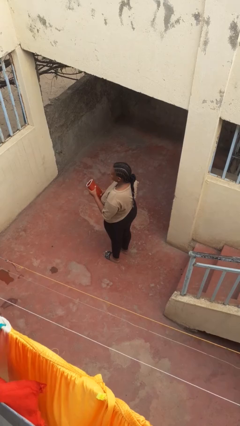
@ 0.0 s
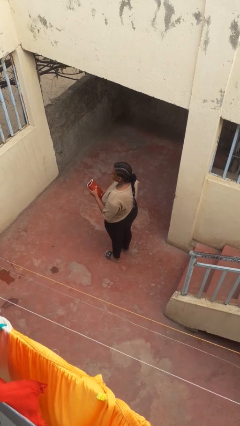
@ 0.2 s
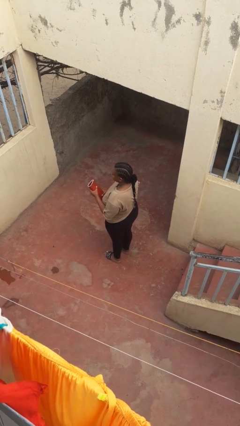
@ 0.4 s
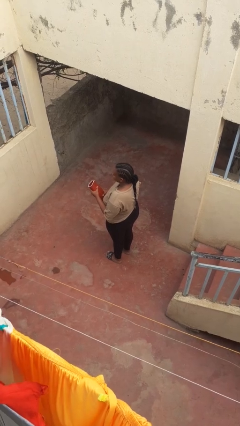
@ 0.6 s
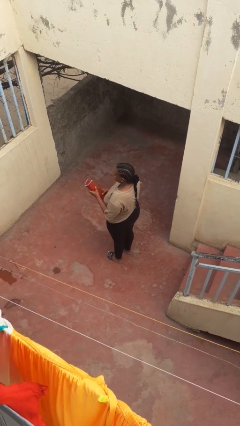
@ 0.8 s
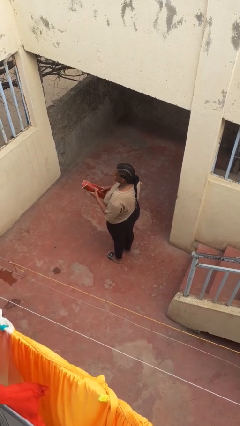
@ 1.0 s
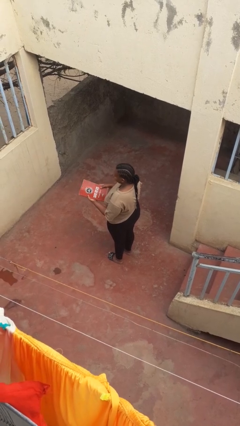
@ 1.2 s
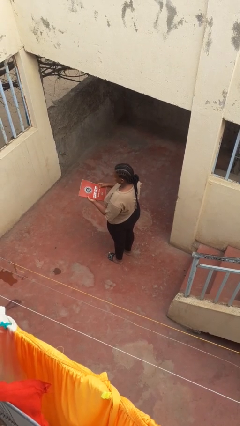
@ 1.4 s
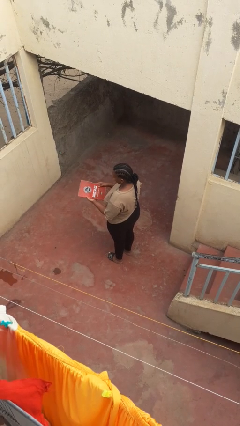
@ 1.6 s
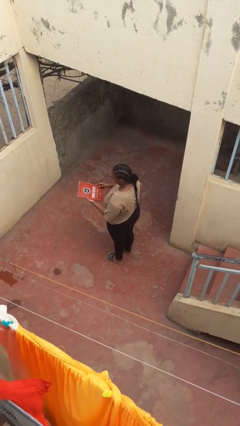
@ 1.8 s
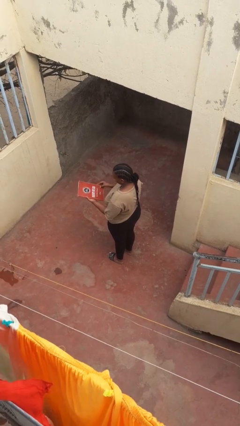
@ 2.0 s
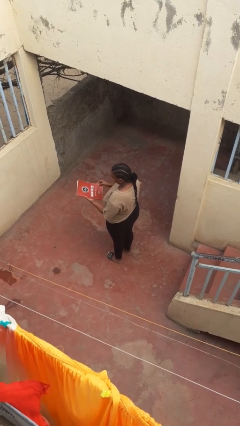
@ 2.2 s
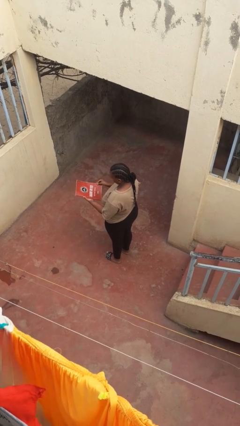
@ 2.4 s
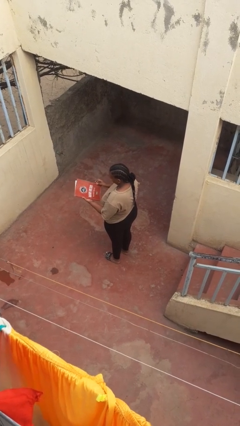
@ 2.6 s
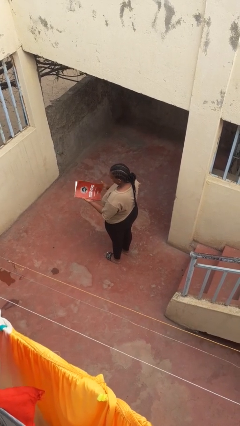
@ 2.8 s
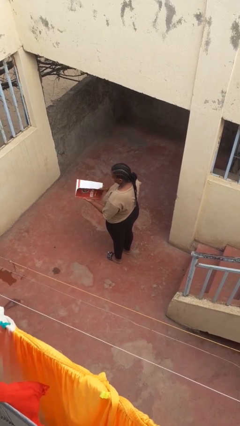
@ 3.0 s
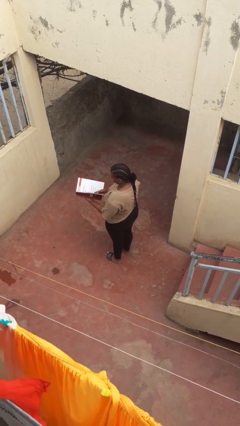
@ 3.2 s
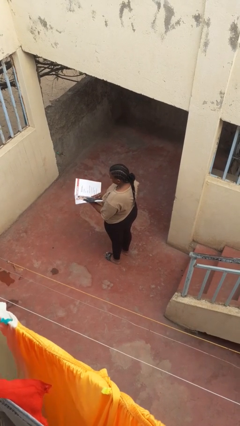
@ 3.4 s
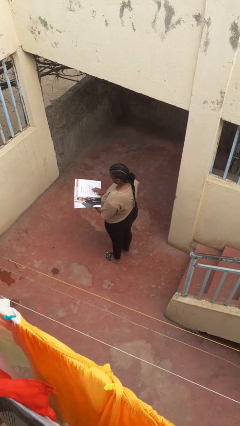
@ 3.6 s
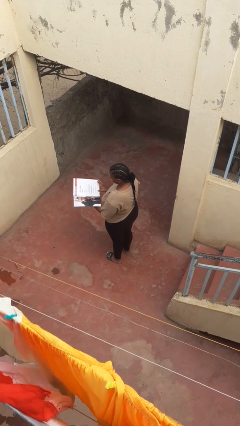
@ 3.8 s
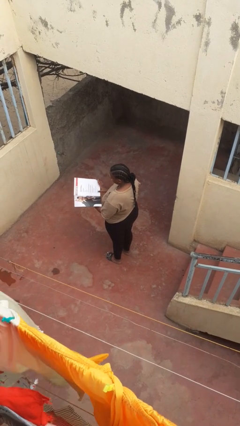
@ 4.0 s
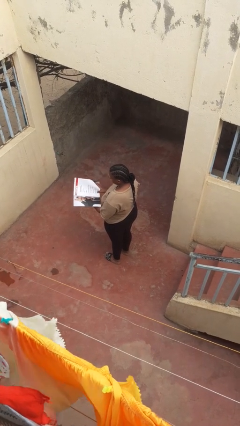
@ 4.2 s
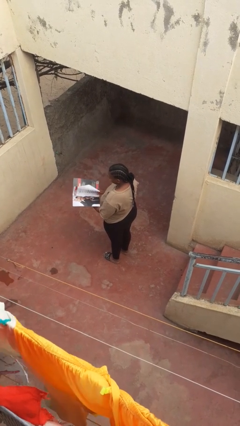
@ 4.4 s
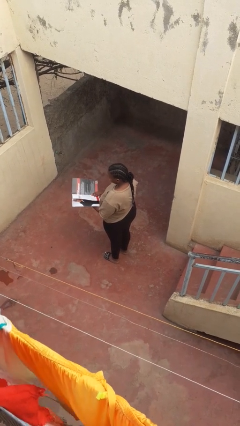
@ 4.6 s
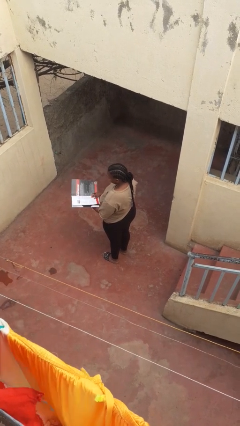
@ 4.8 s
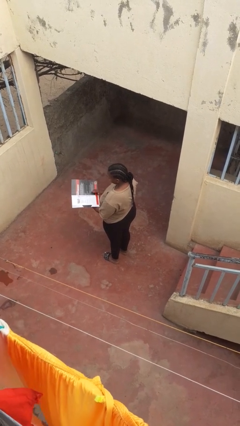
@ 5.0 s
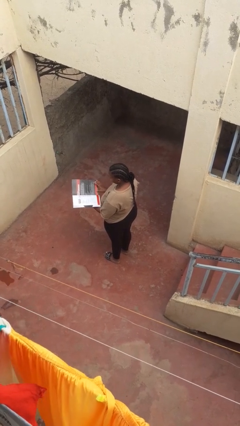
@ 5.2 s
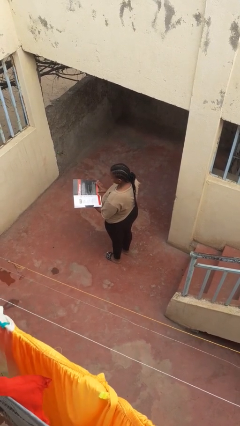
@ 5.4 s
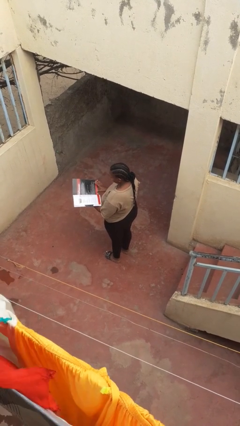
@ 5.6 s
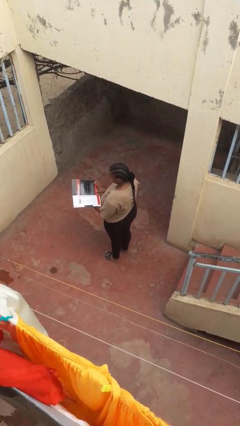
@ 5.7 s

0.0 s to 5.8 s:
person reads magazine

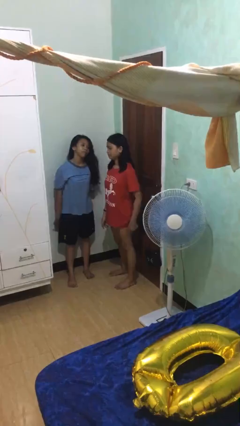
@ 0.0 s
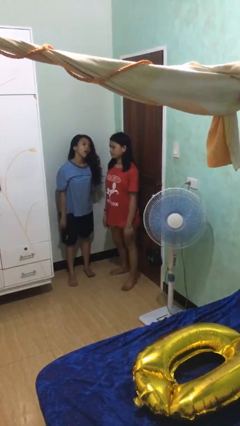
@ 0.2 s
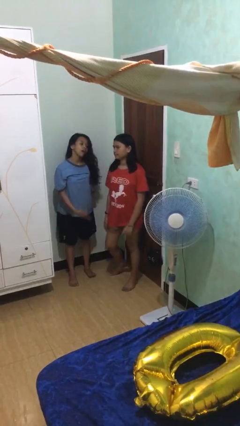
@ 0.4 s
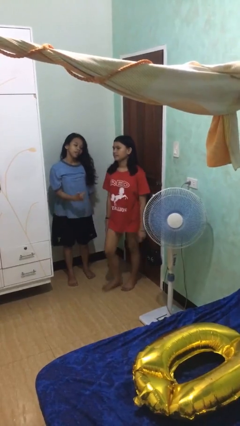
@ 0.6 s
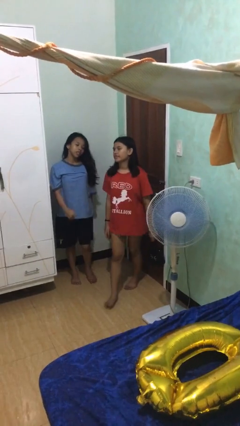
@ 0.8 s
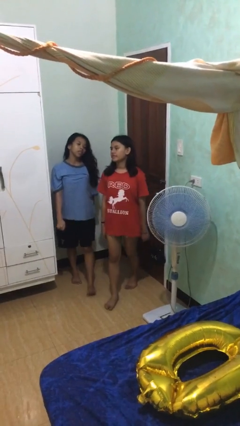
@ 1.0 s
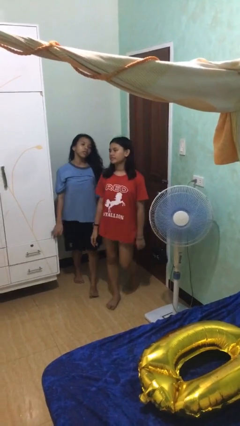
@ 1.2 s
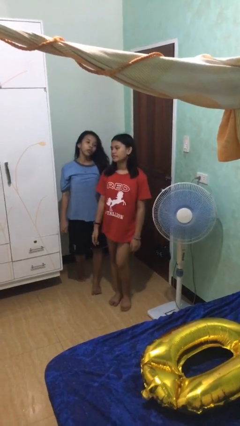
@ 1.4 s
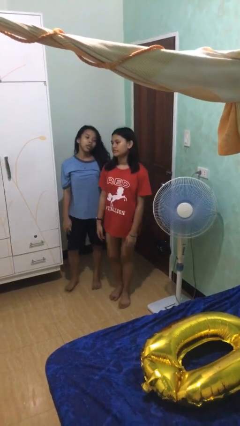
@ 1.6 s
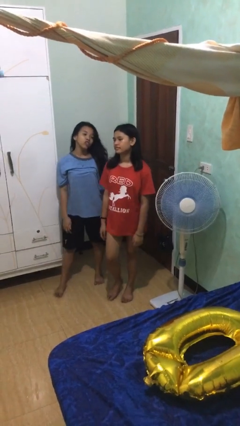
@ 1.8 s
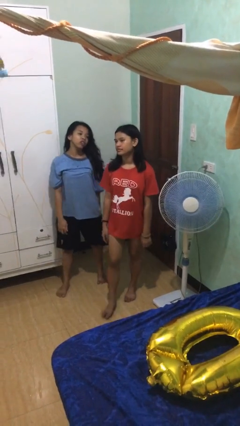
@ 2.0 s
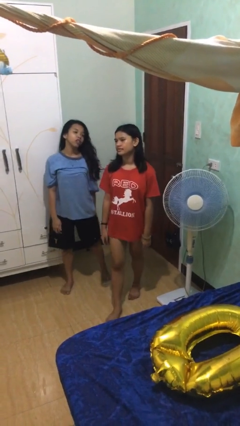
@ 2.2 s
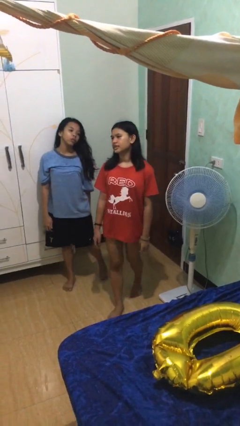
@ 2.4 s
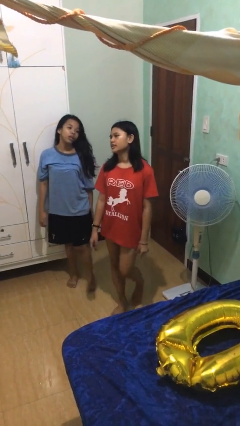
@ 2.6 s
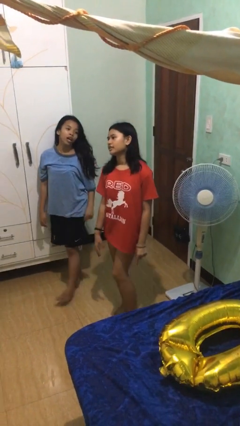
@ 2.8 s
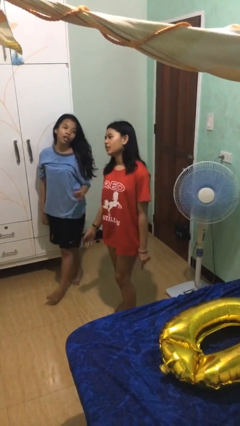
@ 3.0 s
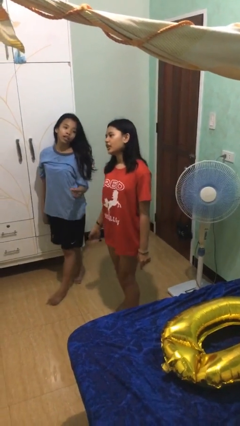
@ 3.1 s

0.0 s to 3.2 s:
person talks to person

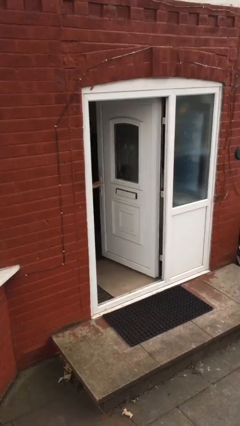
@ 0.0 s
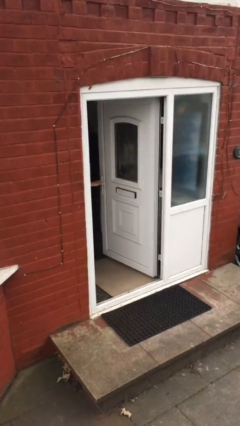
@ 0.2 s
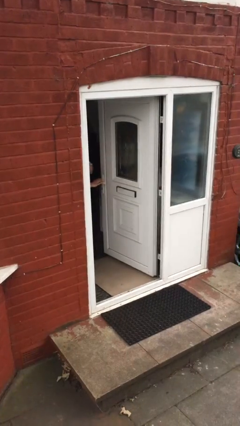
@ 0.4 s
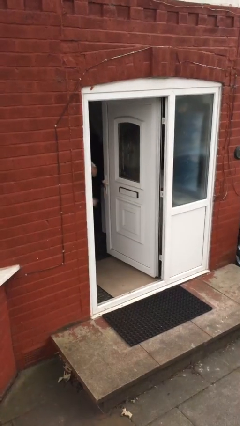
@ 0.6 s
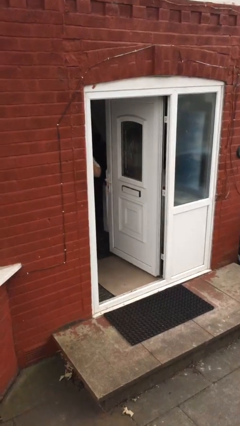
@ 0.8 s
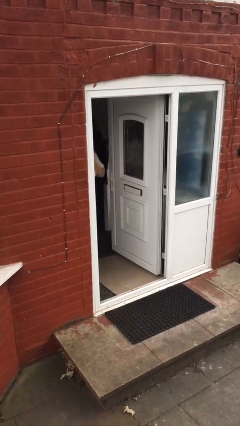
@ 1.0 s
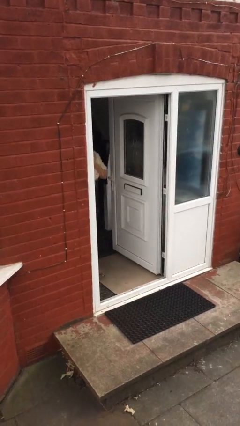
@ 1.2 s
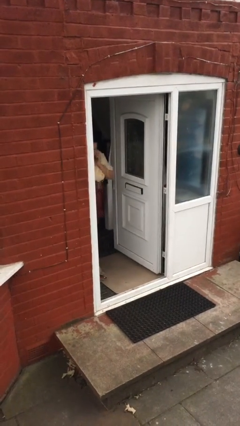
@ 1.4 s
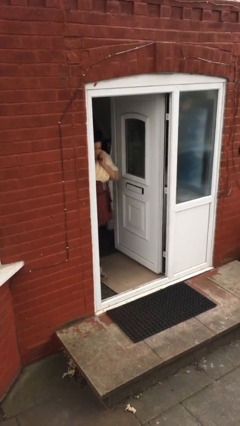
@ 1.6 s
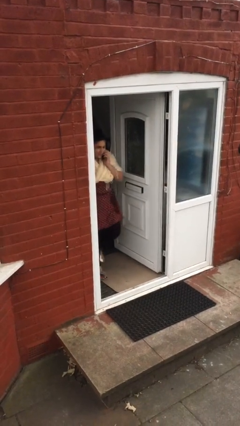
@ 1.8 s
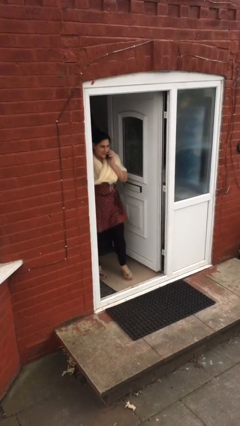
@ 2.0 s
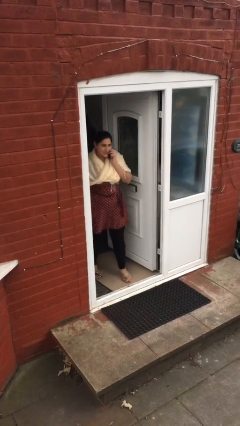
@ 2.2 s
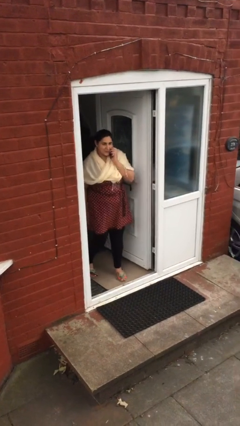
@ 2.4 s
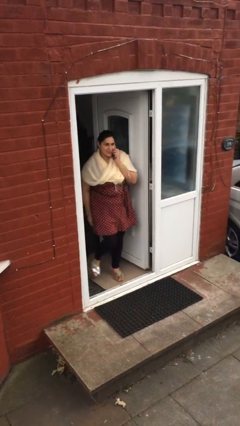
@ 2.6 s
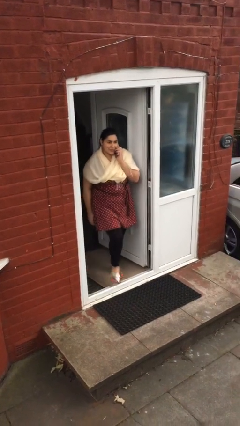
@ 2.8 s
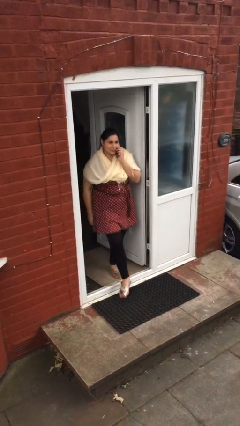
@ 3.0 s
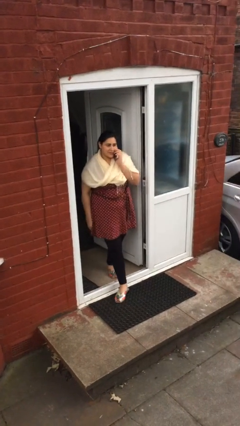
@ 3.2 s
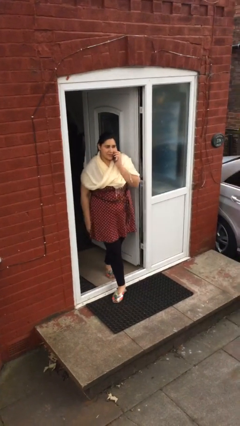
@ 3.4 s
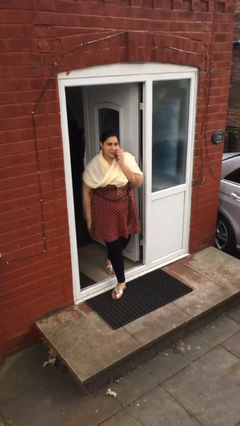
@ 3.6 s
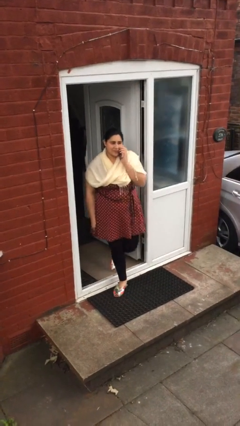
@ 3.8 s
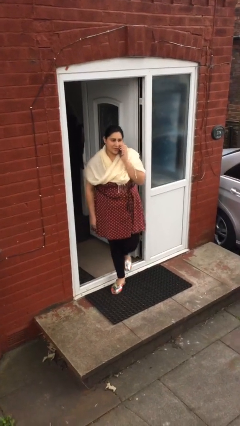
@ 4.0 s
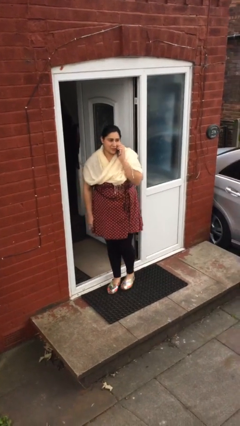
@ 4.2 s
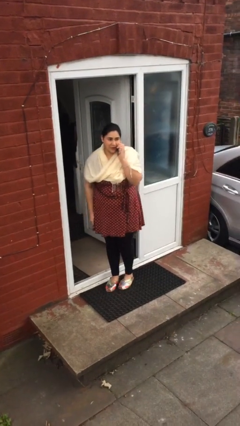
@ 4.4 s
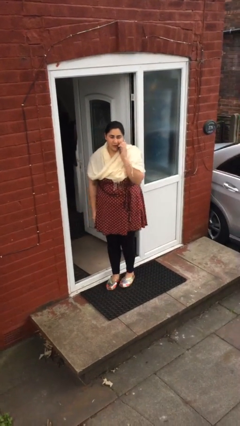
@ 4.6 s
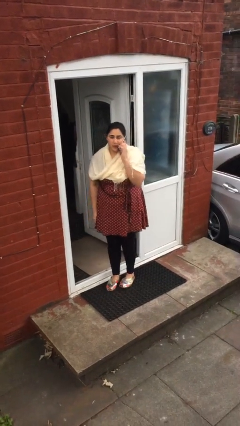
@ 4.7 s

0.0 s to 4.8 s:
person enters scene through structure

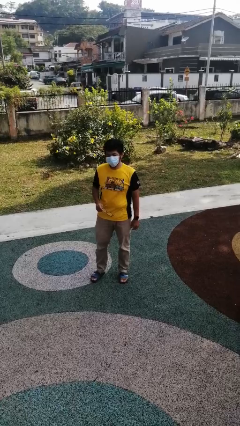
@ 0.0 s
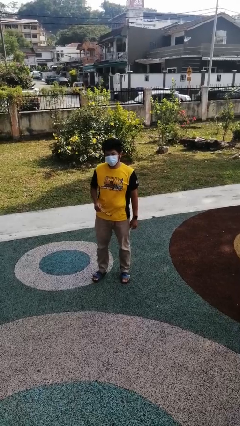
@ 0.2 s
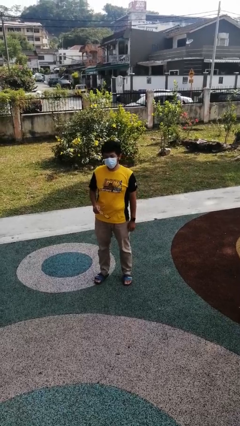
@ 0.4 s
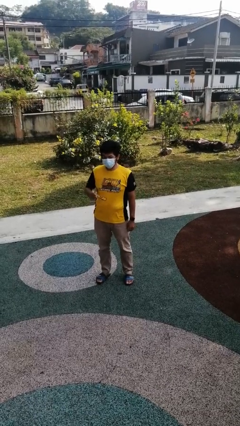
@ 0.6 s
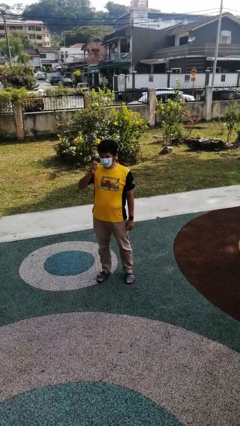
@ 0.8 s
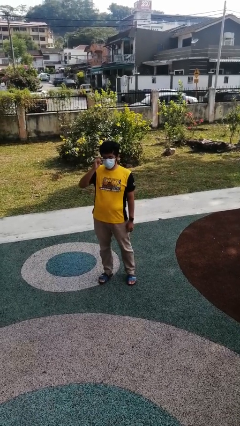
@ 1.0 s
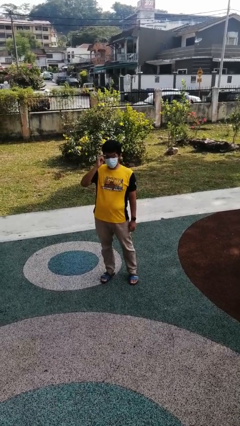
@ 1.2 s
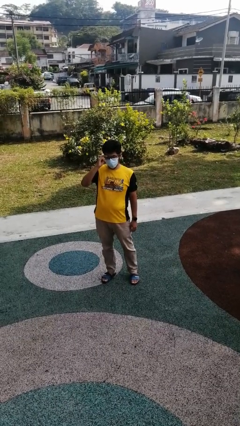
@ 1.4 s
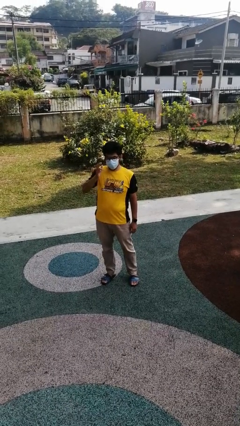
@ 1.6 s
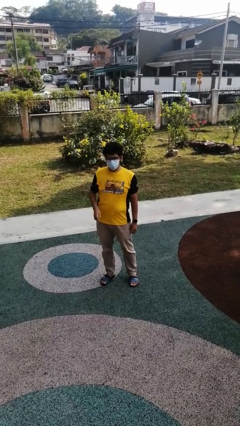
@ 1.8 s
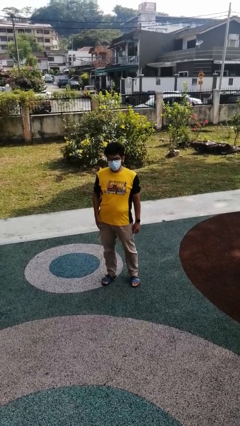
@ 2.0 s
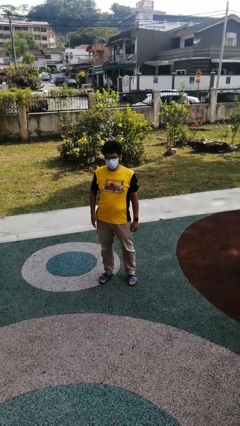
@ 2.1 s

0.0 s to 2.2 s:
person puts on glasses

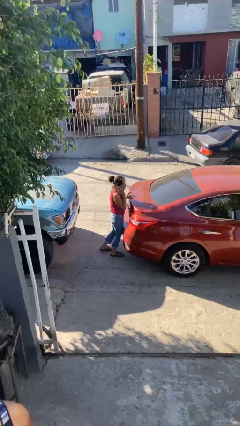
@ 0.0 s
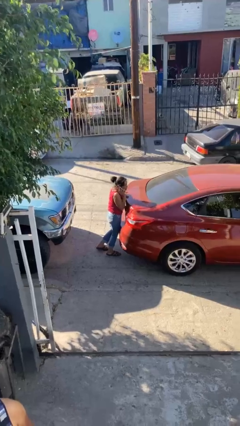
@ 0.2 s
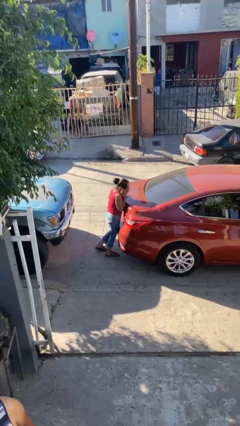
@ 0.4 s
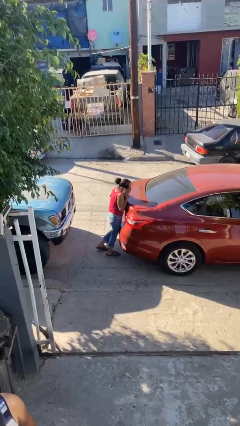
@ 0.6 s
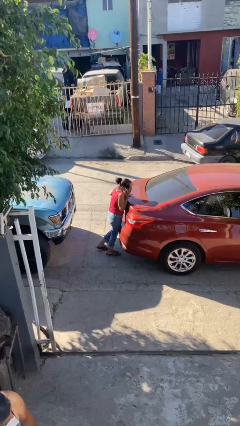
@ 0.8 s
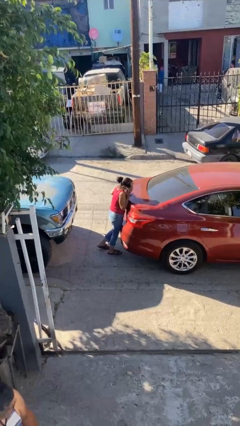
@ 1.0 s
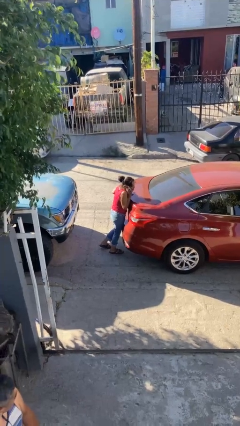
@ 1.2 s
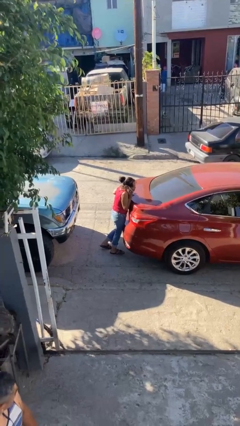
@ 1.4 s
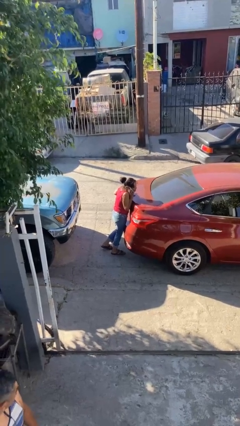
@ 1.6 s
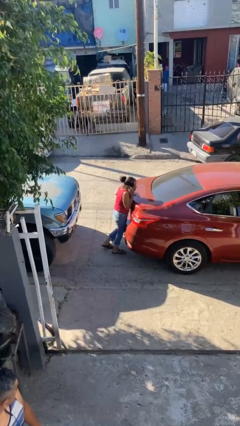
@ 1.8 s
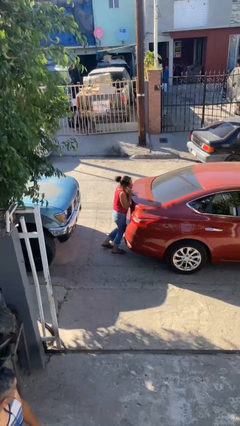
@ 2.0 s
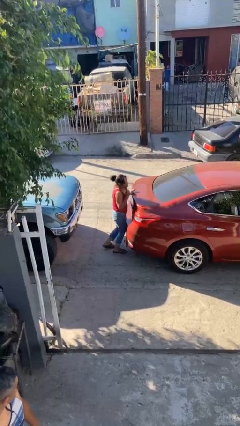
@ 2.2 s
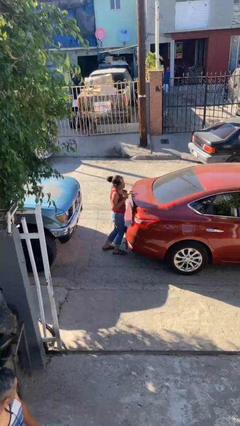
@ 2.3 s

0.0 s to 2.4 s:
person leans against car
